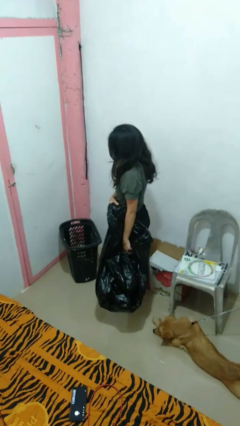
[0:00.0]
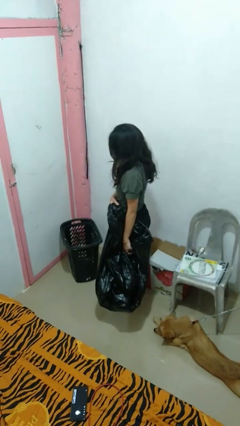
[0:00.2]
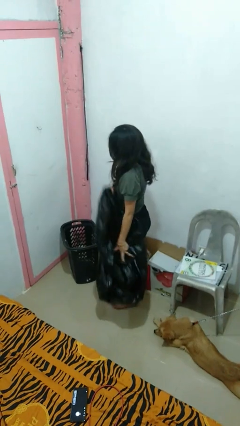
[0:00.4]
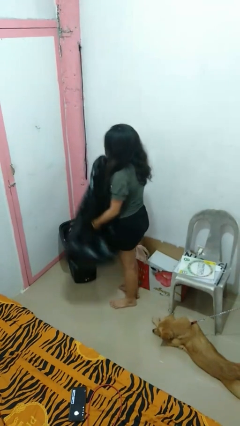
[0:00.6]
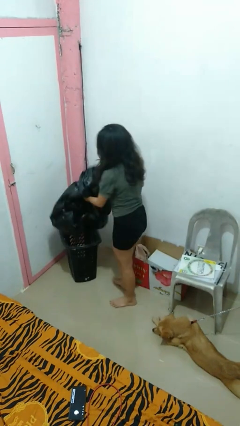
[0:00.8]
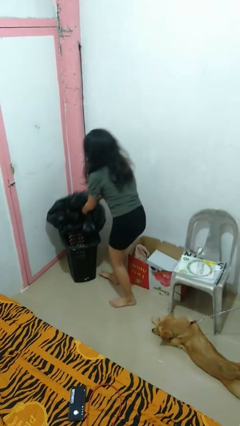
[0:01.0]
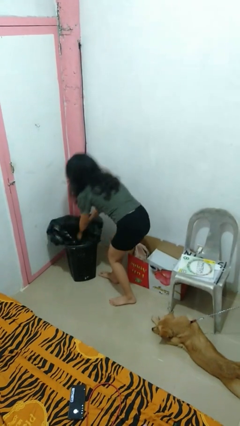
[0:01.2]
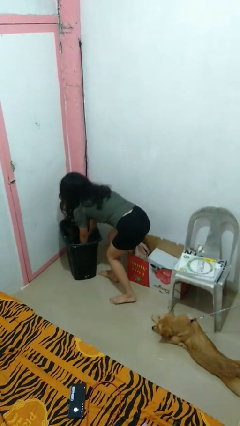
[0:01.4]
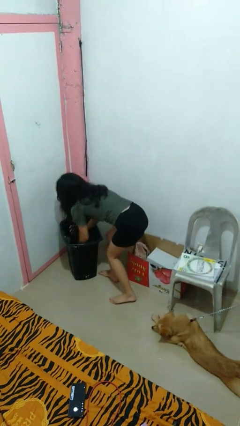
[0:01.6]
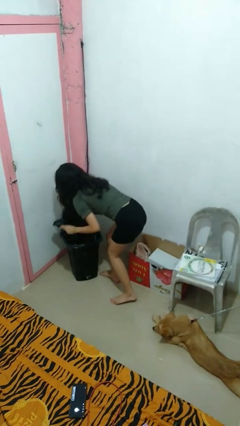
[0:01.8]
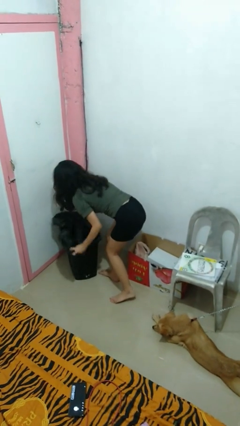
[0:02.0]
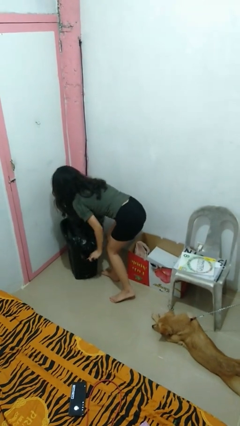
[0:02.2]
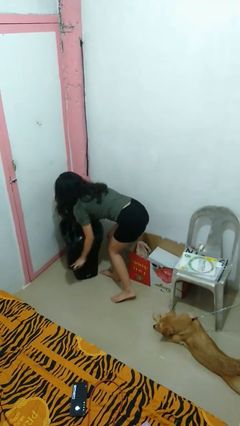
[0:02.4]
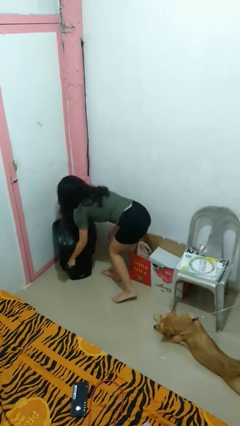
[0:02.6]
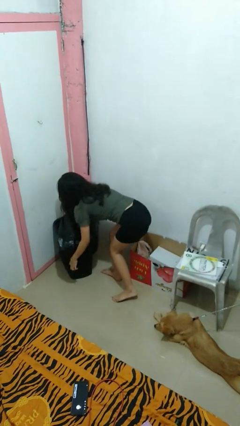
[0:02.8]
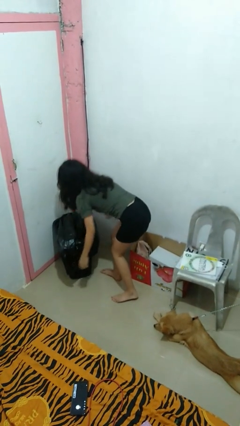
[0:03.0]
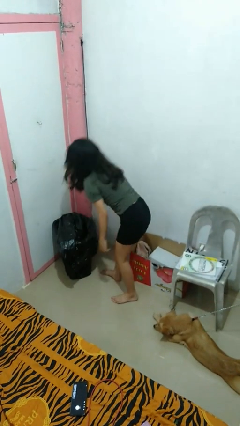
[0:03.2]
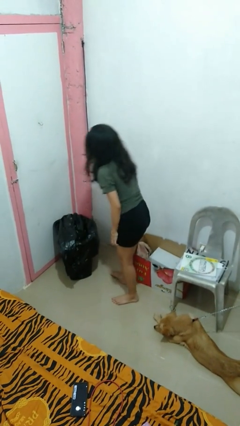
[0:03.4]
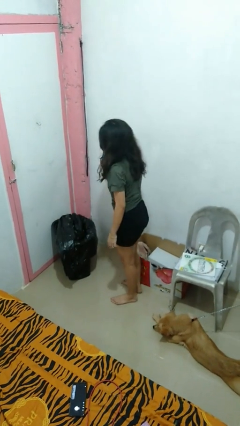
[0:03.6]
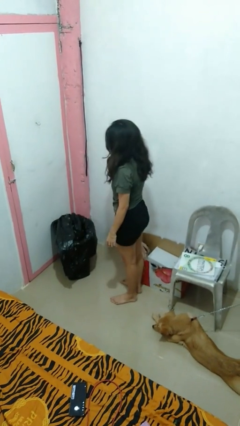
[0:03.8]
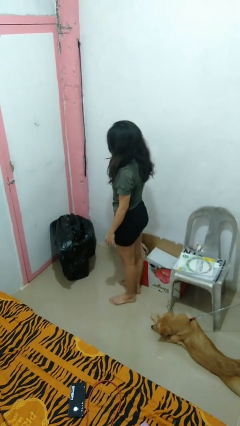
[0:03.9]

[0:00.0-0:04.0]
person inserts trashbag into trashcan

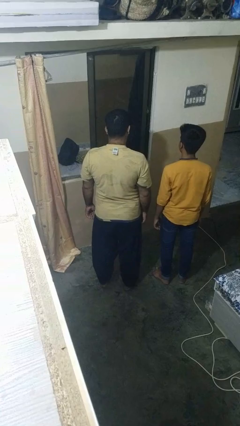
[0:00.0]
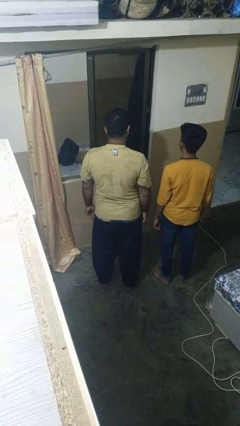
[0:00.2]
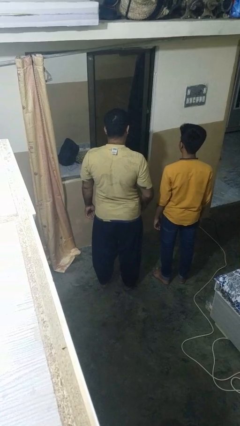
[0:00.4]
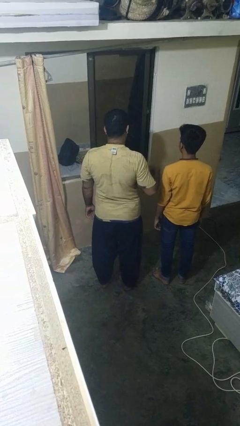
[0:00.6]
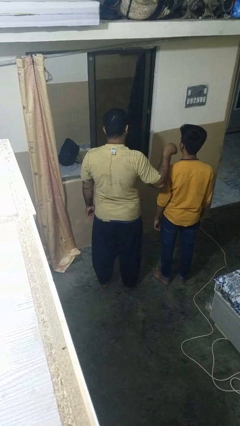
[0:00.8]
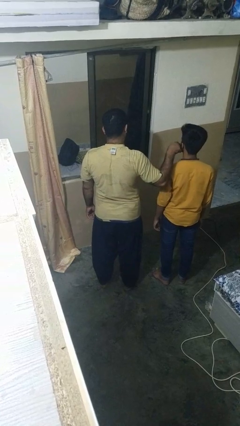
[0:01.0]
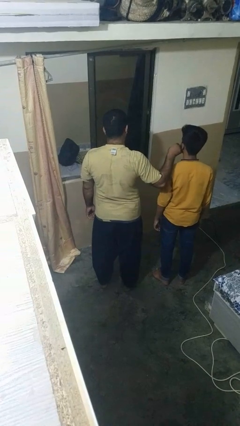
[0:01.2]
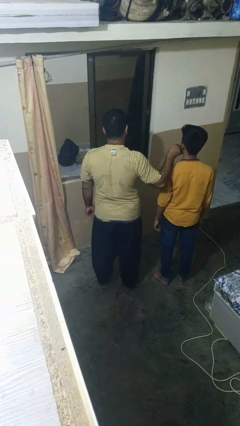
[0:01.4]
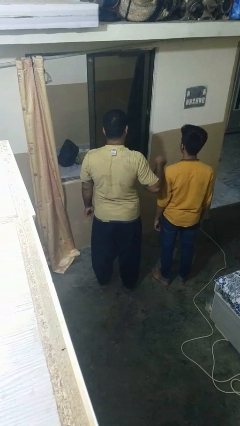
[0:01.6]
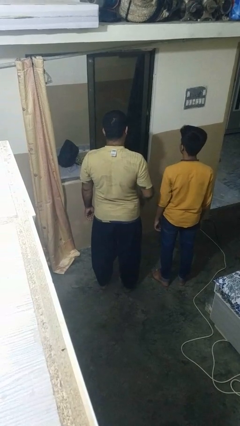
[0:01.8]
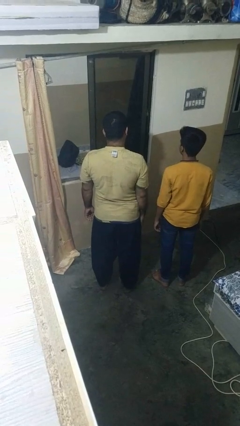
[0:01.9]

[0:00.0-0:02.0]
person touches face of person

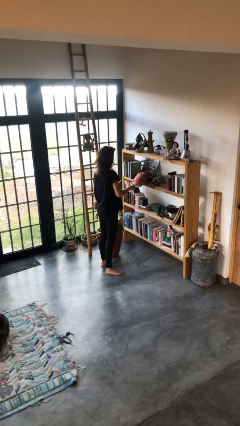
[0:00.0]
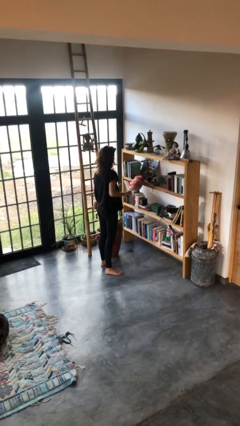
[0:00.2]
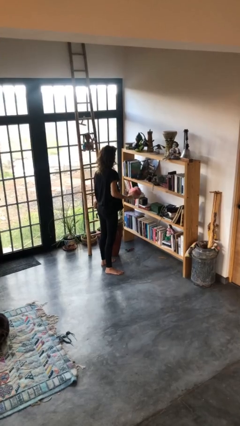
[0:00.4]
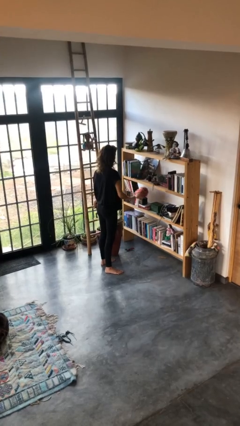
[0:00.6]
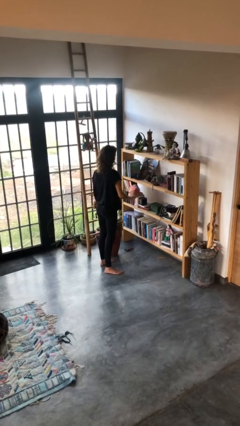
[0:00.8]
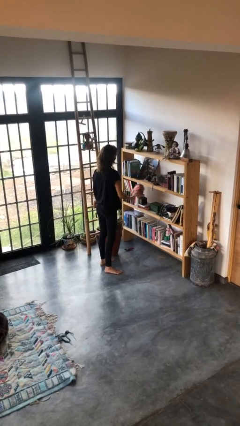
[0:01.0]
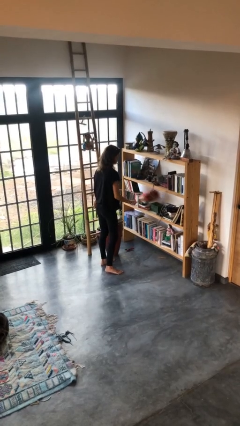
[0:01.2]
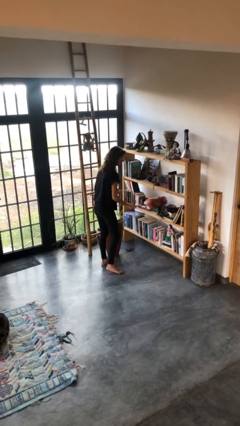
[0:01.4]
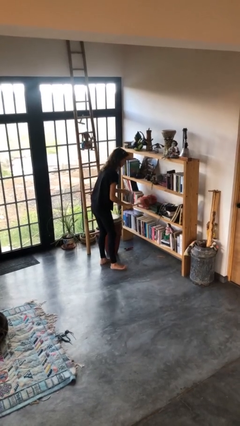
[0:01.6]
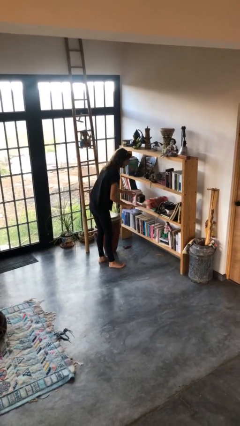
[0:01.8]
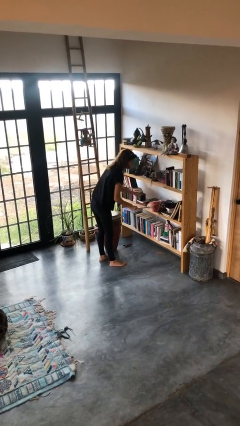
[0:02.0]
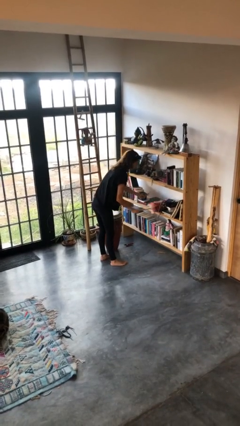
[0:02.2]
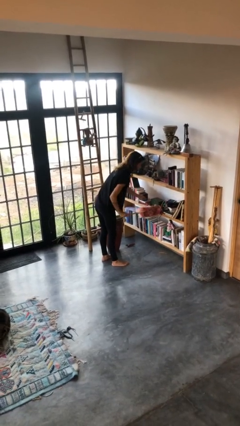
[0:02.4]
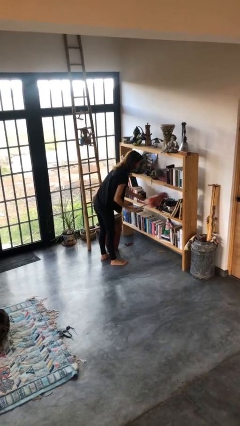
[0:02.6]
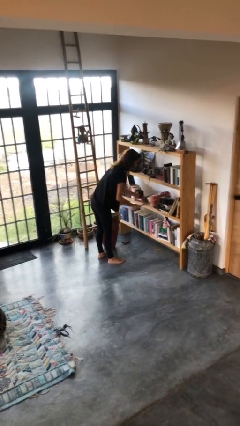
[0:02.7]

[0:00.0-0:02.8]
person dusts furniture

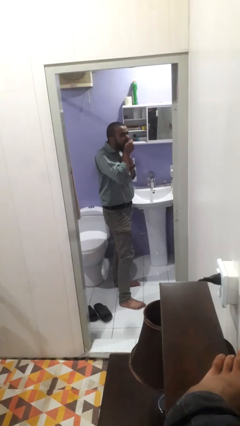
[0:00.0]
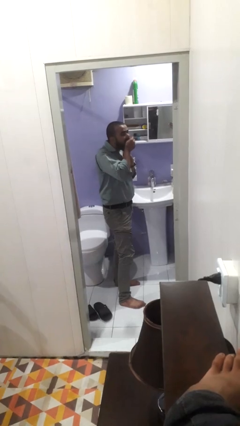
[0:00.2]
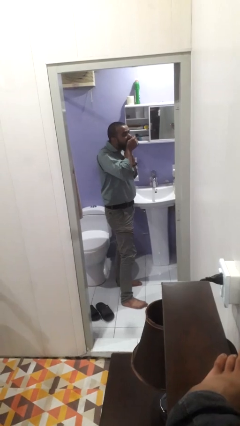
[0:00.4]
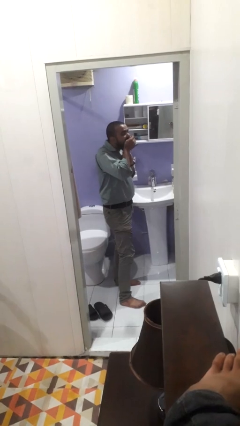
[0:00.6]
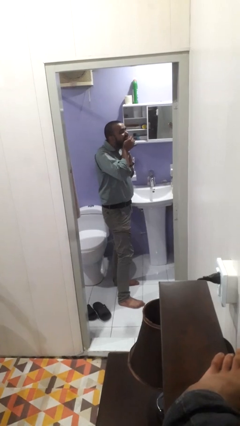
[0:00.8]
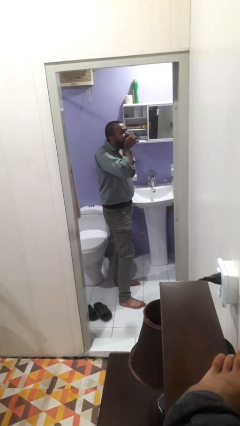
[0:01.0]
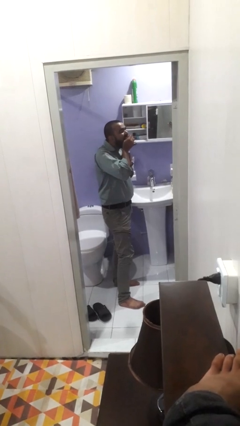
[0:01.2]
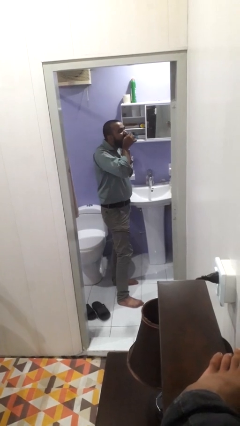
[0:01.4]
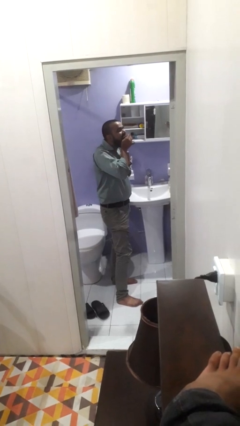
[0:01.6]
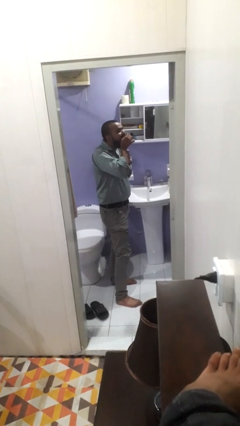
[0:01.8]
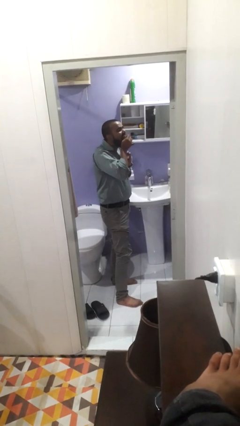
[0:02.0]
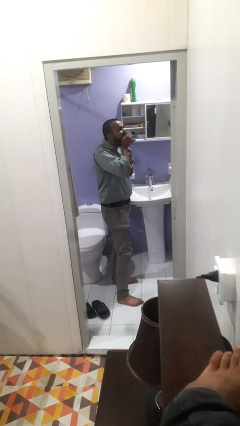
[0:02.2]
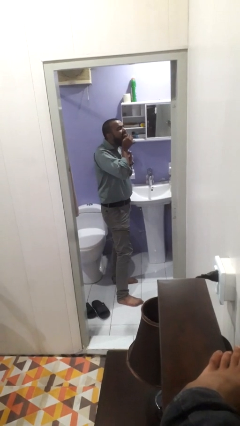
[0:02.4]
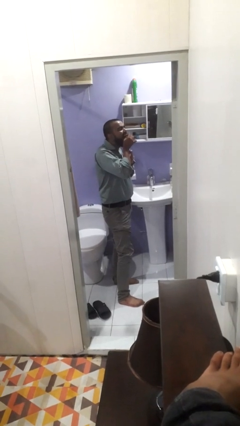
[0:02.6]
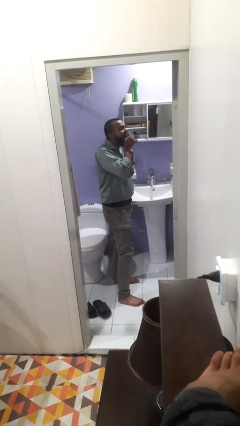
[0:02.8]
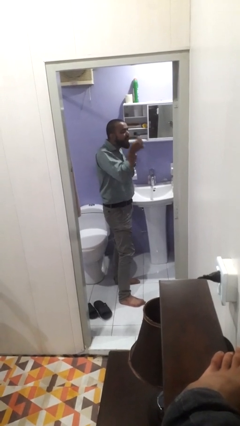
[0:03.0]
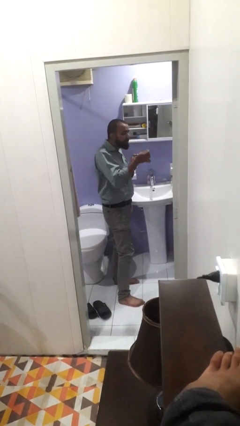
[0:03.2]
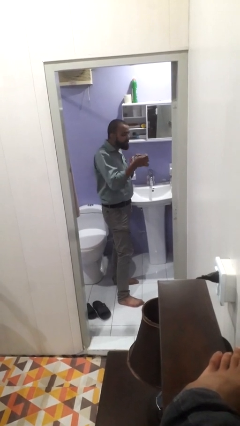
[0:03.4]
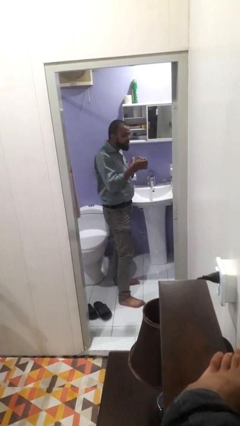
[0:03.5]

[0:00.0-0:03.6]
person flosses

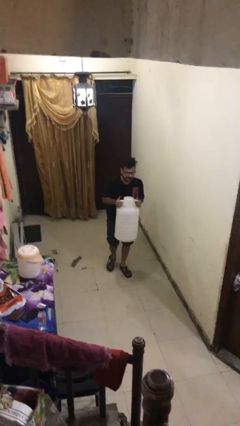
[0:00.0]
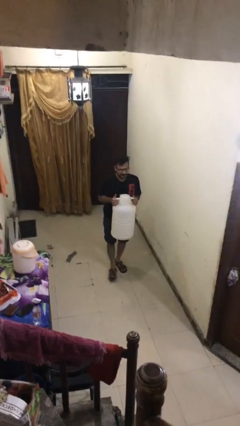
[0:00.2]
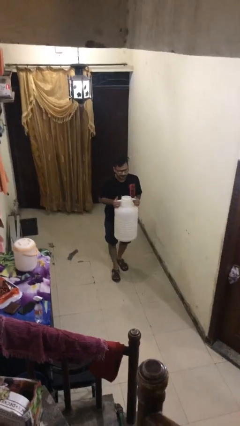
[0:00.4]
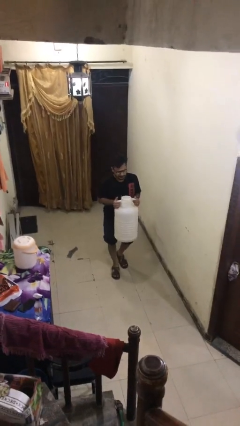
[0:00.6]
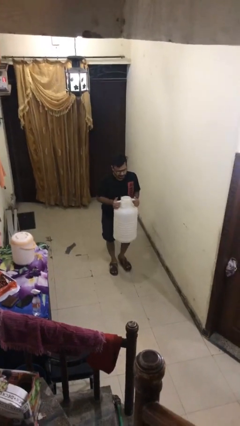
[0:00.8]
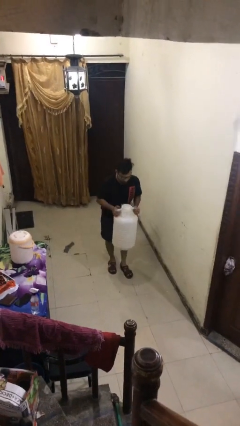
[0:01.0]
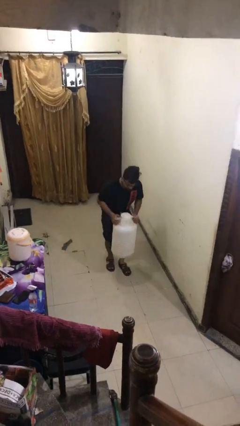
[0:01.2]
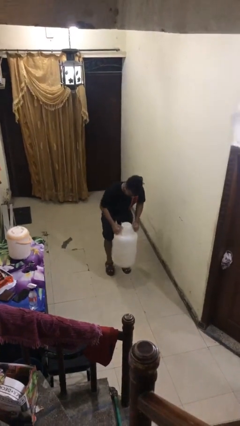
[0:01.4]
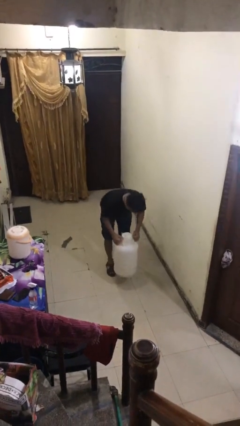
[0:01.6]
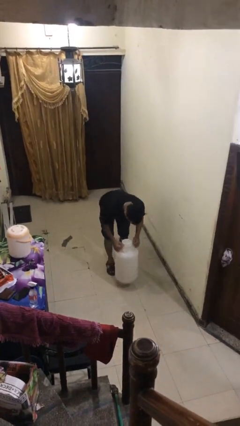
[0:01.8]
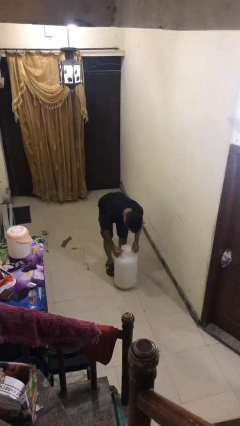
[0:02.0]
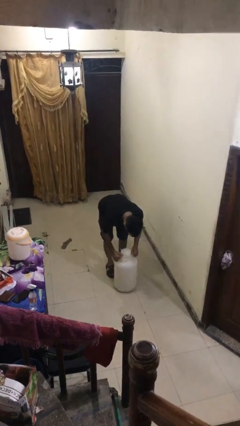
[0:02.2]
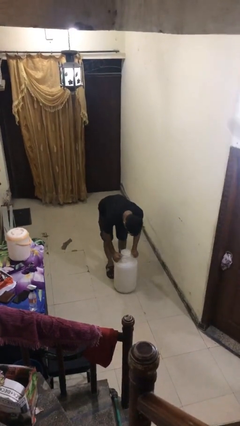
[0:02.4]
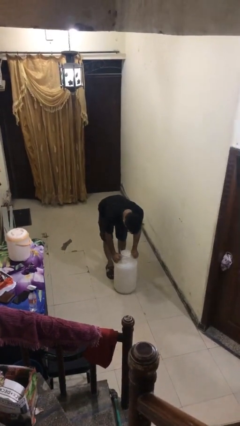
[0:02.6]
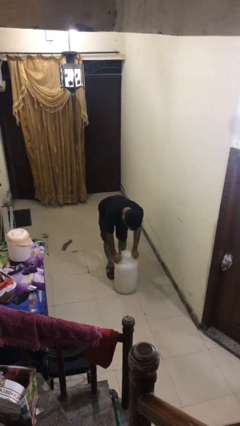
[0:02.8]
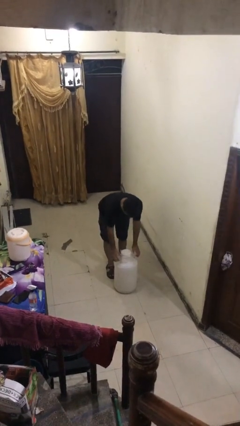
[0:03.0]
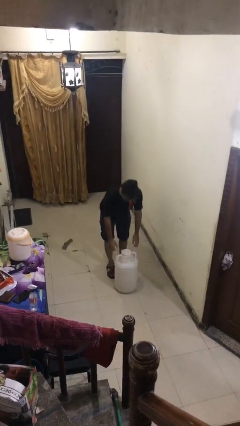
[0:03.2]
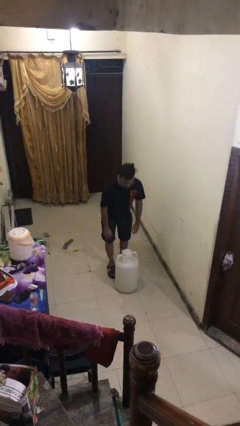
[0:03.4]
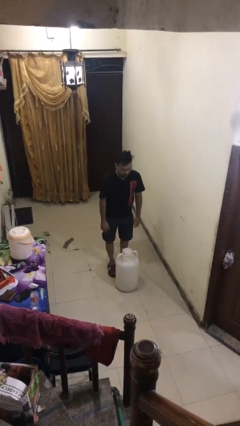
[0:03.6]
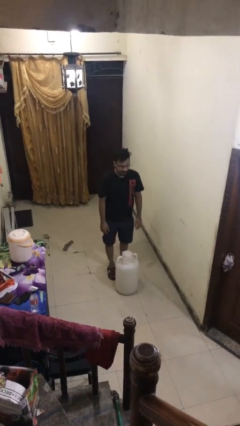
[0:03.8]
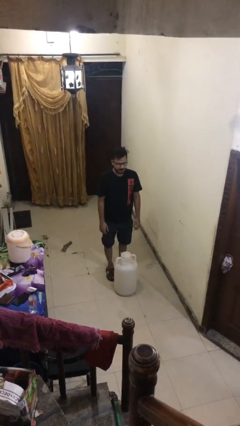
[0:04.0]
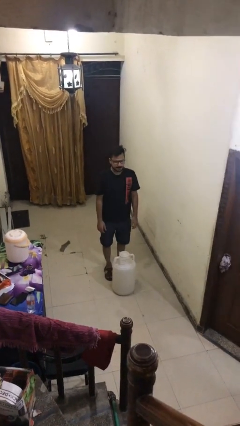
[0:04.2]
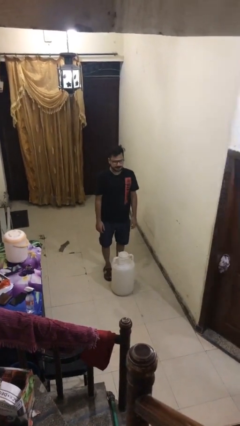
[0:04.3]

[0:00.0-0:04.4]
person puts down object on floor

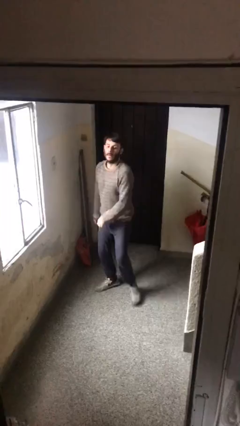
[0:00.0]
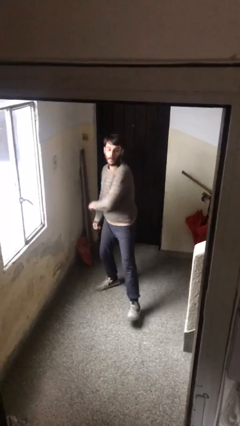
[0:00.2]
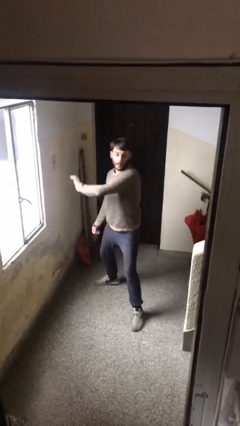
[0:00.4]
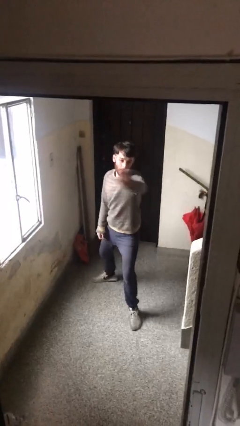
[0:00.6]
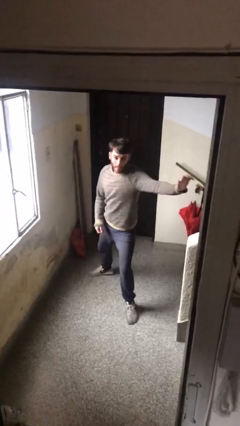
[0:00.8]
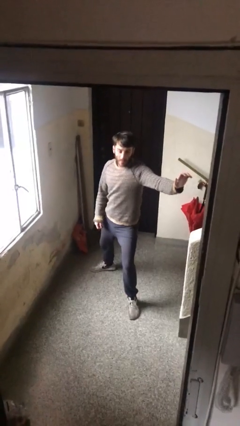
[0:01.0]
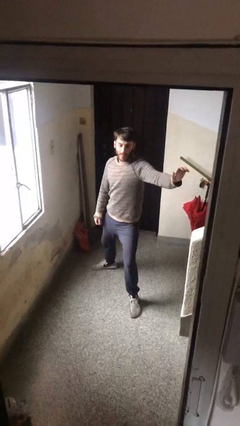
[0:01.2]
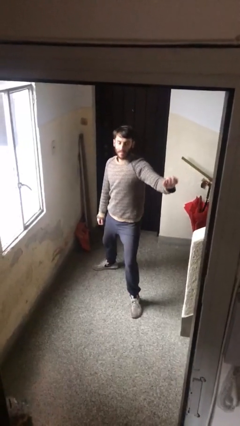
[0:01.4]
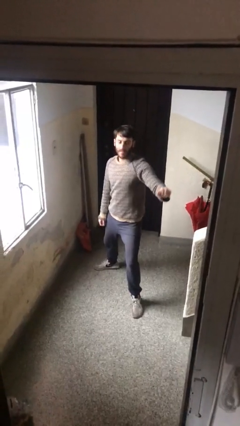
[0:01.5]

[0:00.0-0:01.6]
person karate chop
